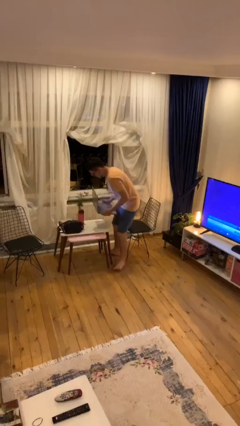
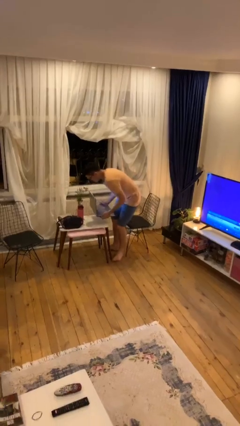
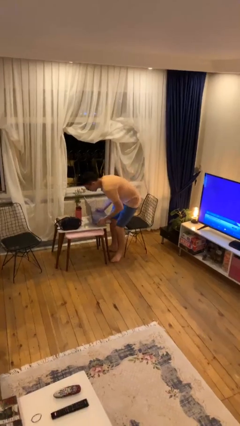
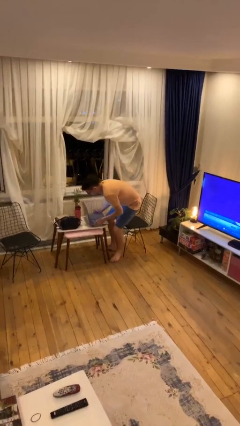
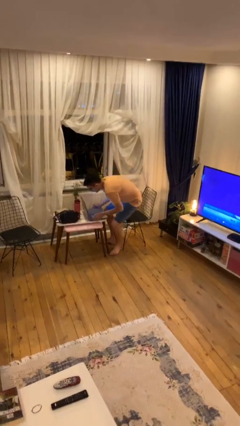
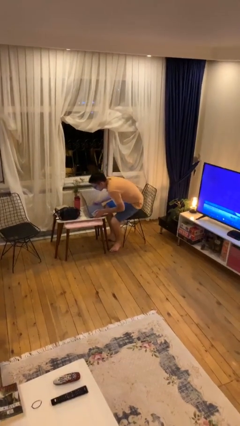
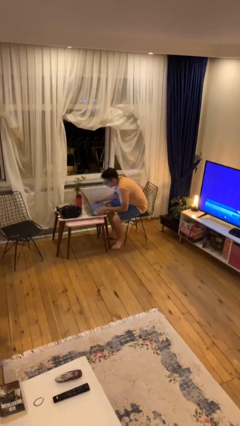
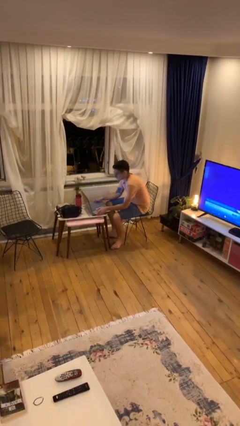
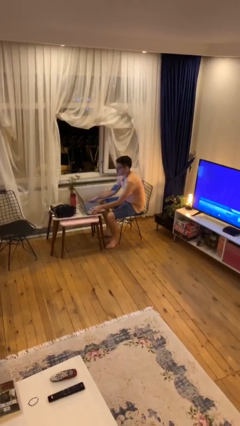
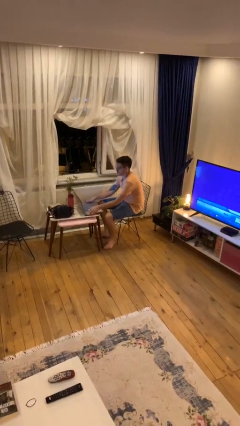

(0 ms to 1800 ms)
person sits down

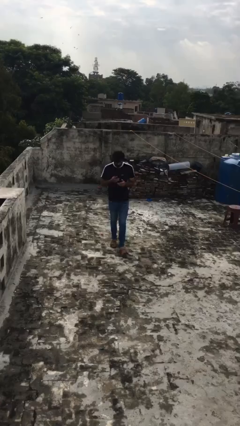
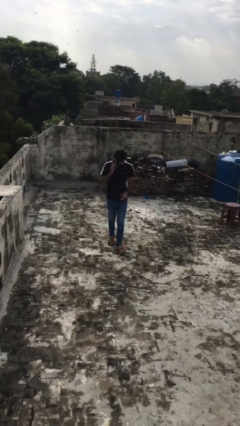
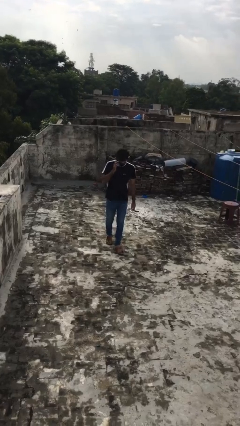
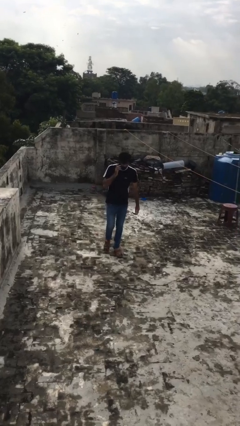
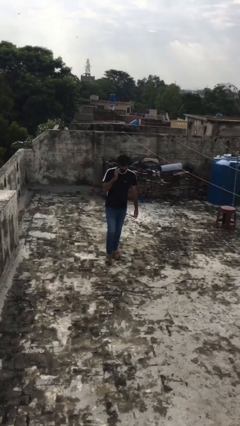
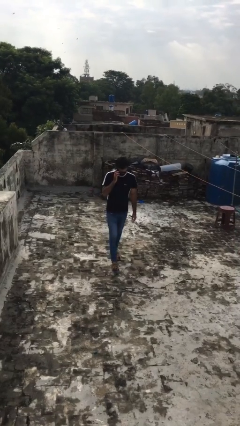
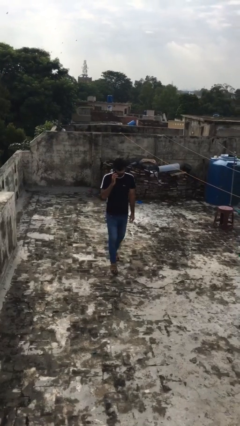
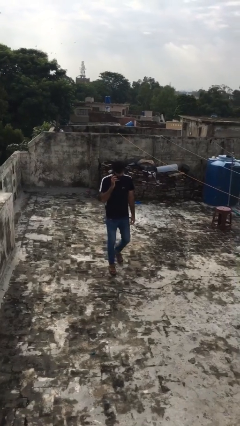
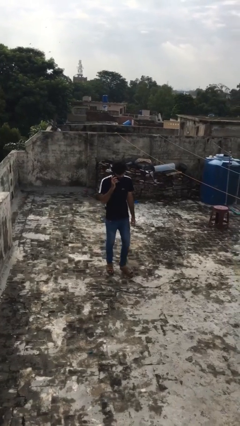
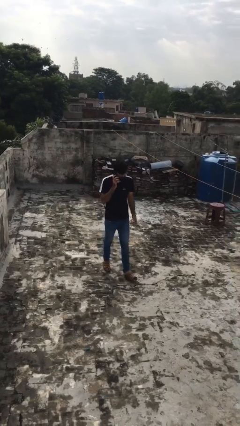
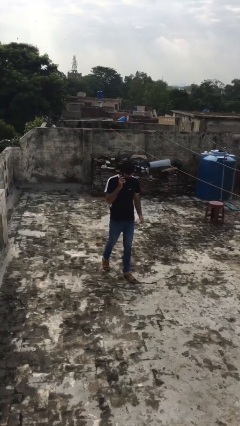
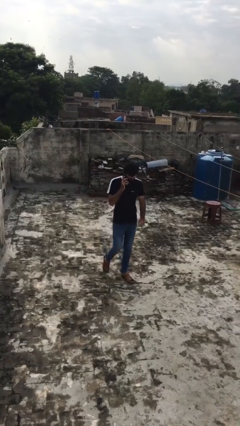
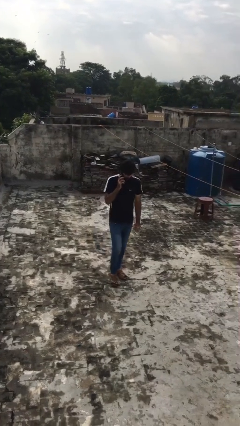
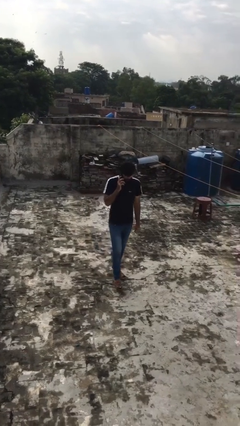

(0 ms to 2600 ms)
person talks on phone

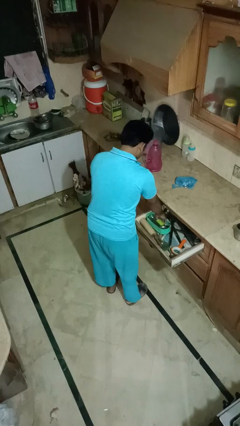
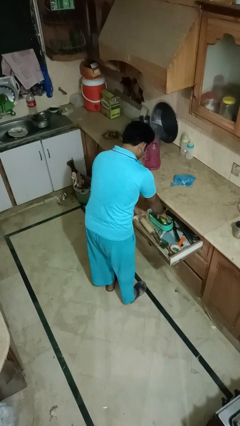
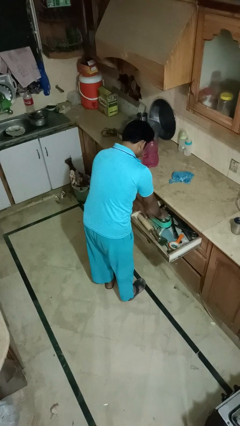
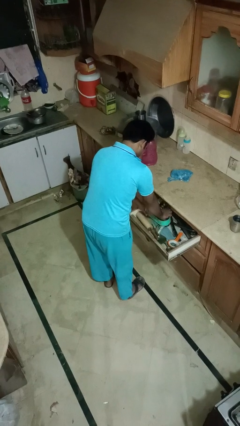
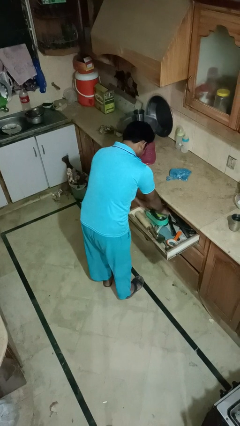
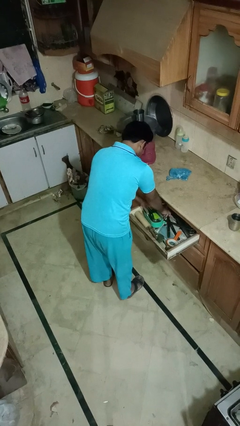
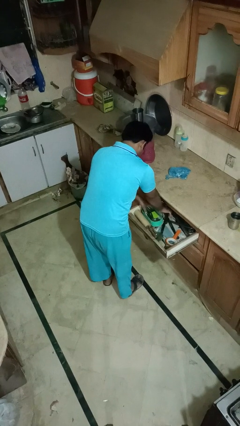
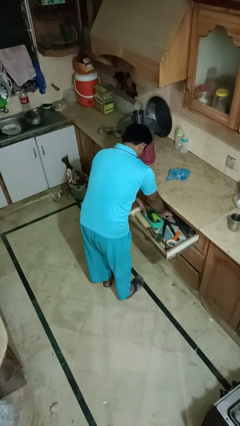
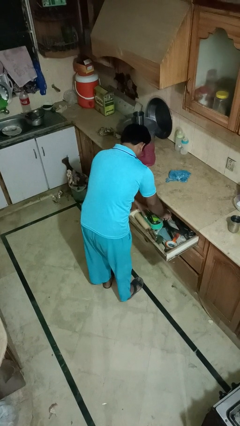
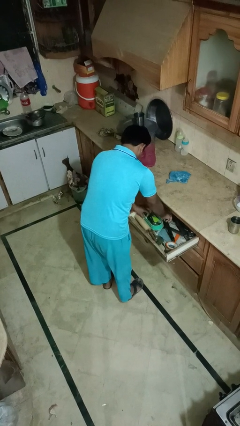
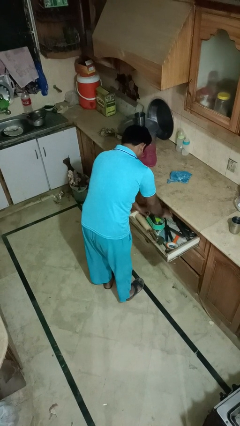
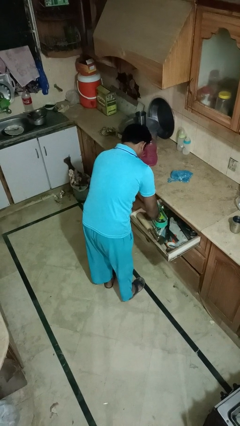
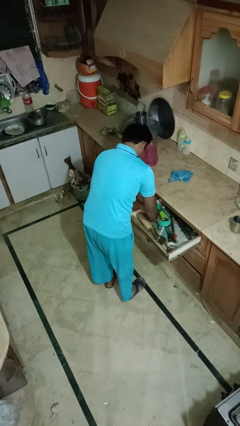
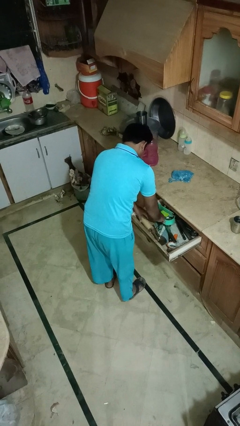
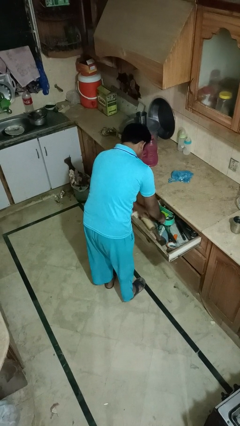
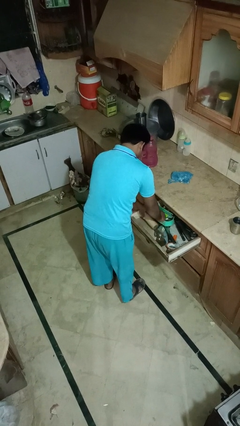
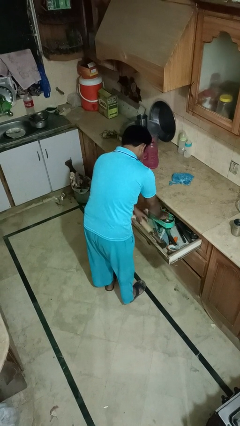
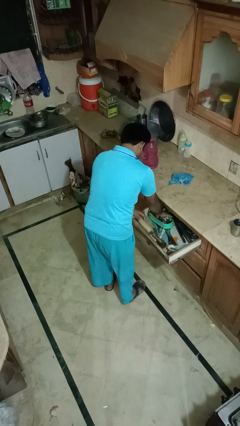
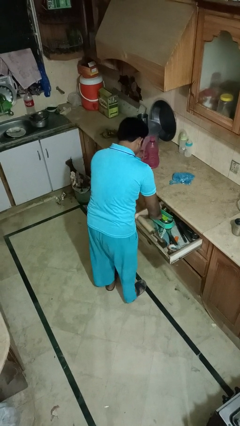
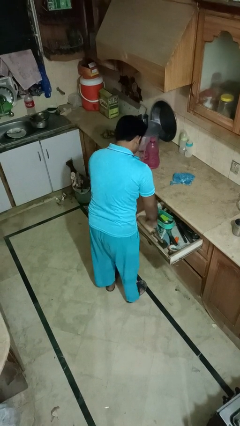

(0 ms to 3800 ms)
person searches in kitchen drawer

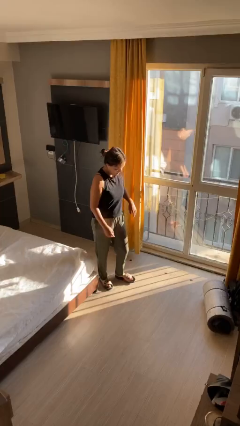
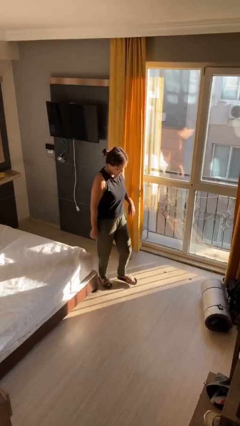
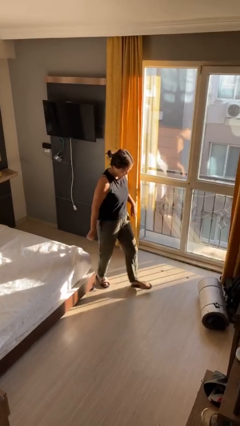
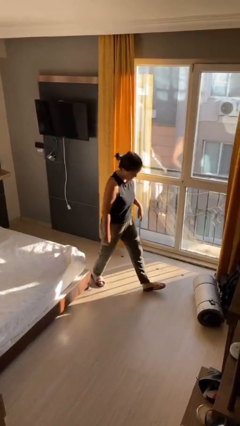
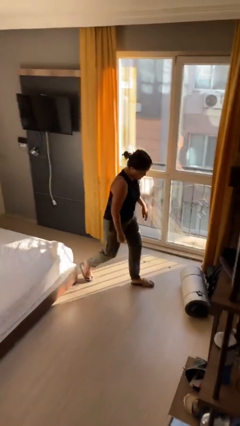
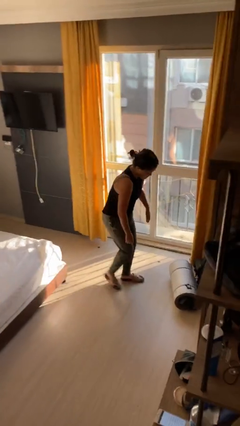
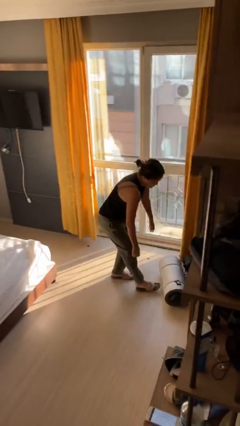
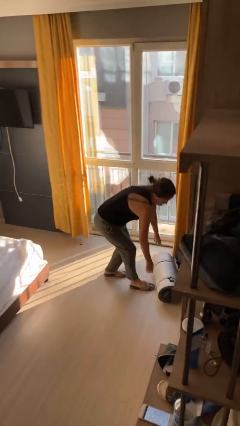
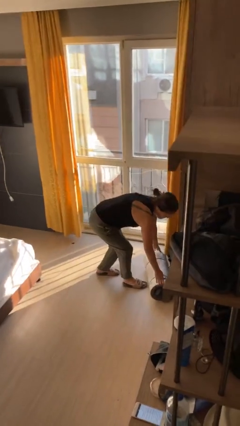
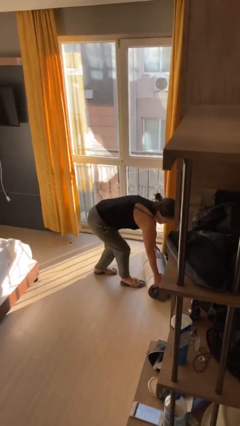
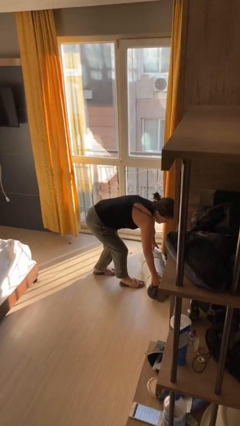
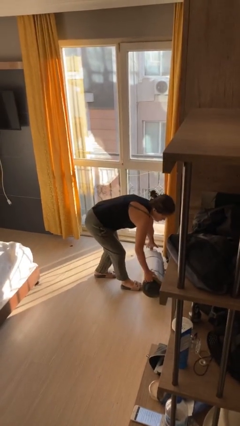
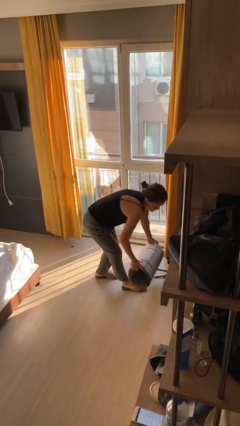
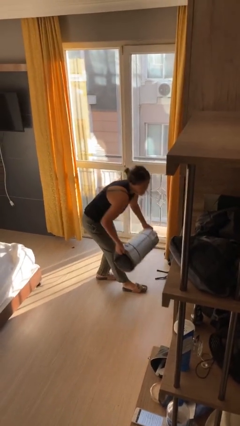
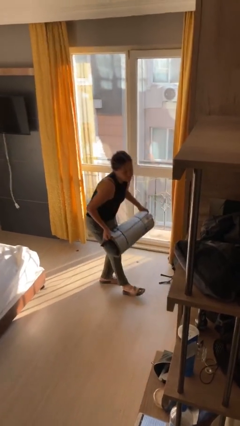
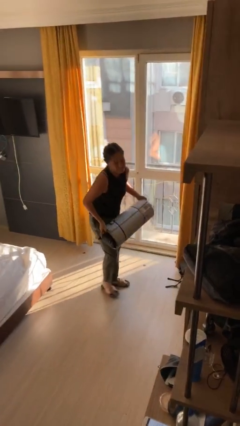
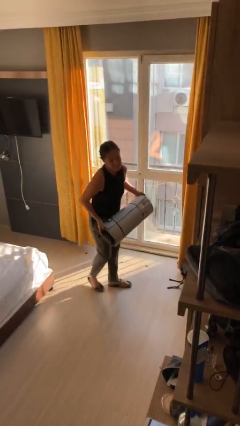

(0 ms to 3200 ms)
person picks up object from floor

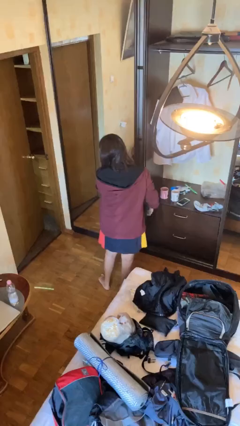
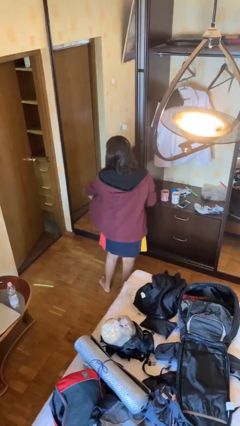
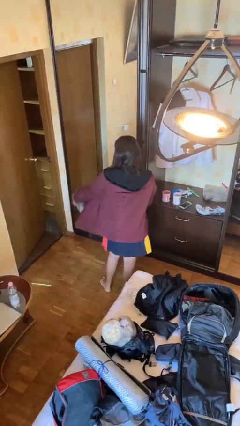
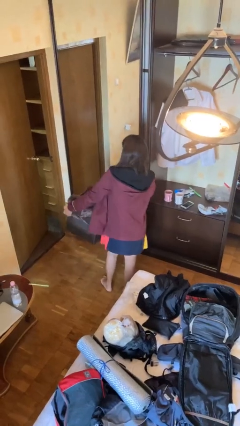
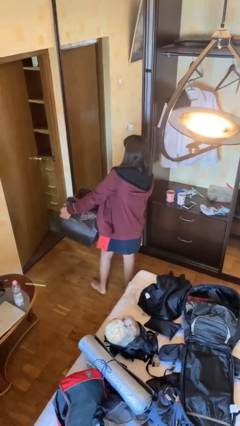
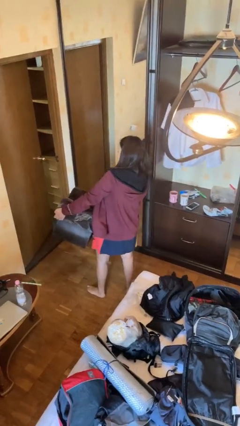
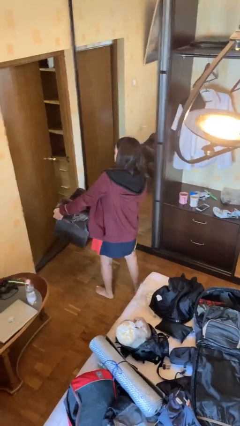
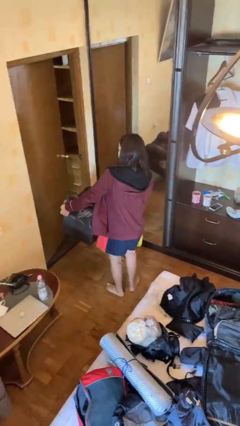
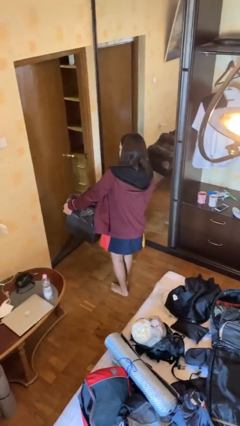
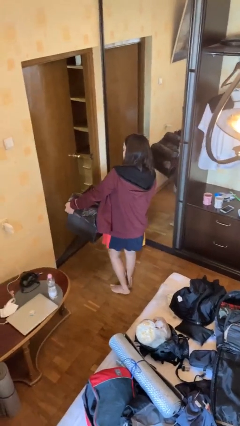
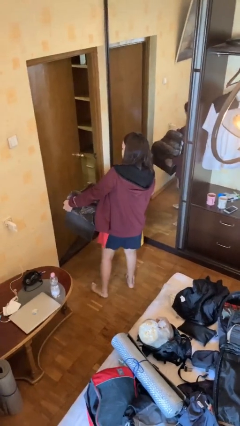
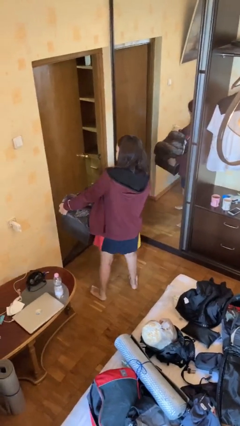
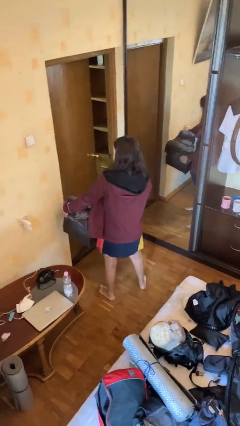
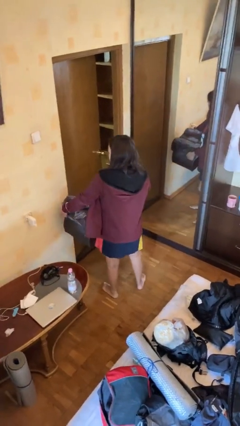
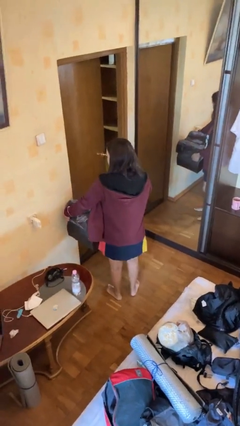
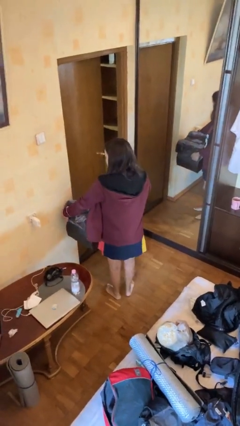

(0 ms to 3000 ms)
person carries furniture

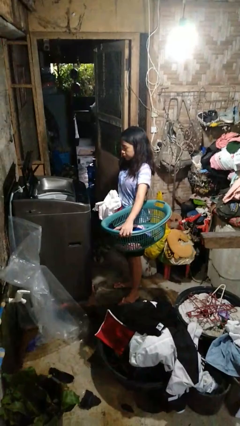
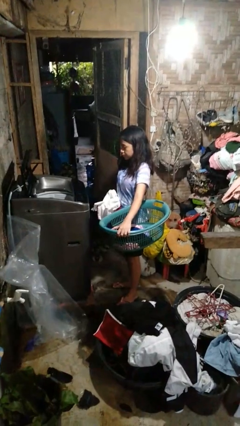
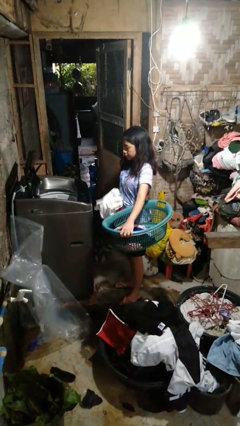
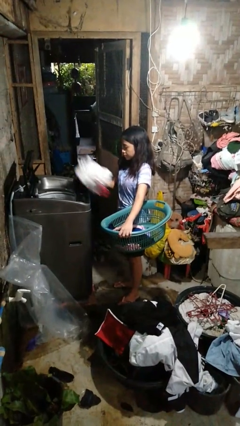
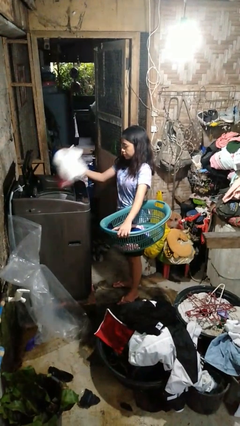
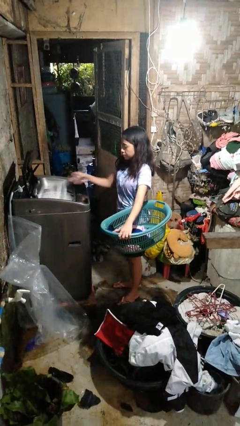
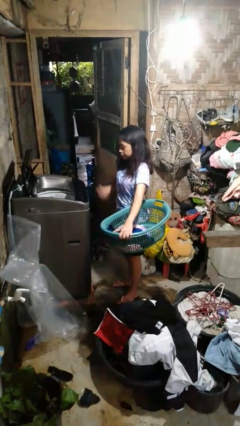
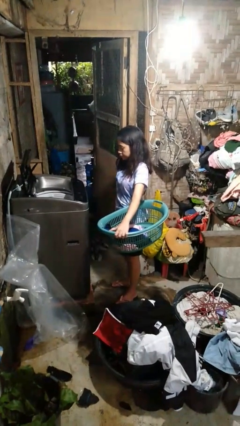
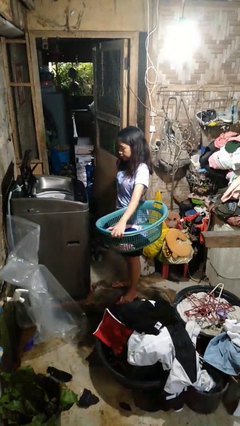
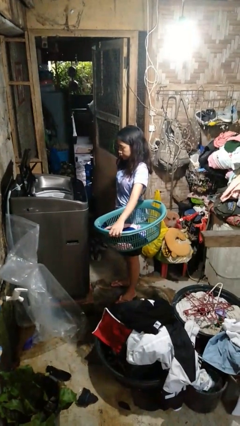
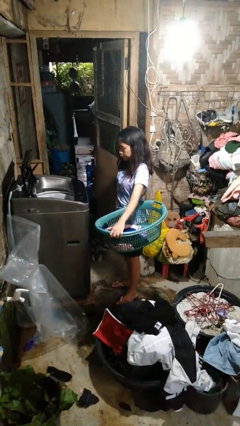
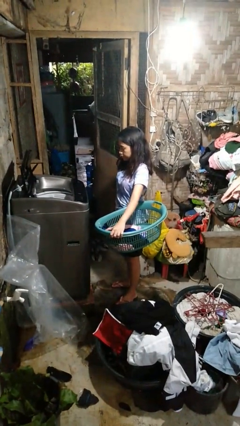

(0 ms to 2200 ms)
person loads dryer

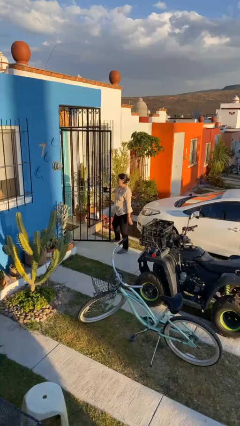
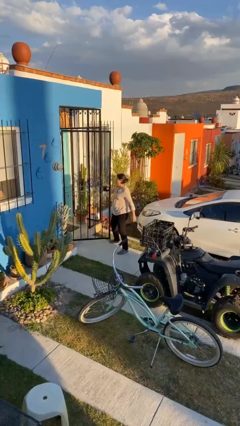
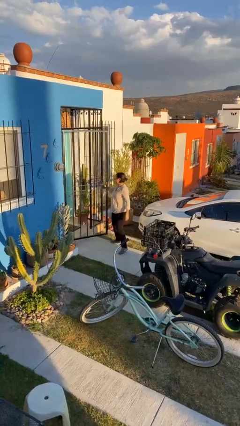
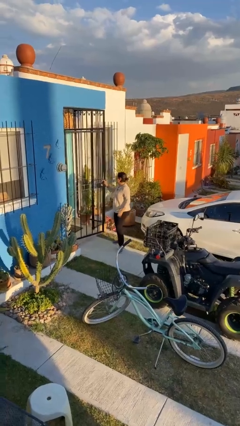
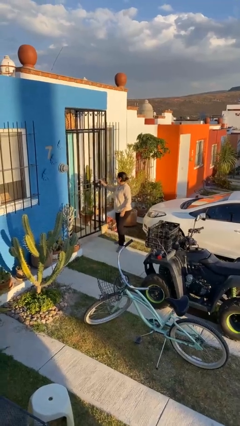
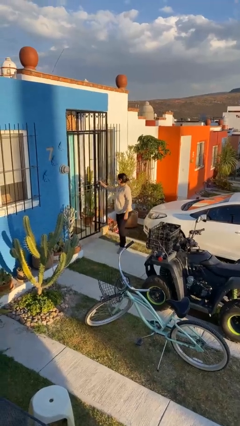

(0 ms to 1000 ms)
person closes facility door
